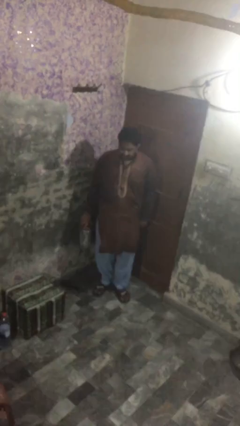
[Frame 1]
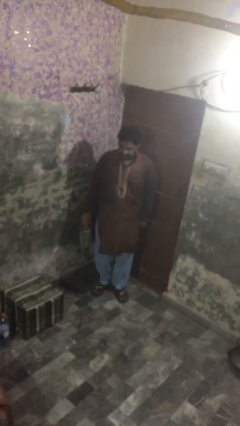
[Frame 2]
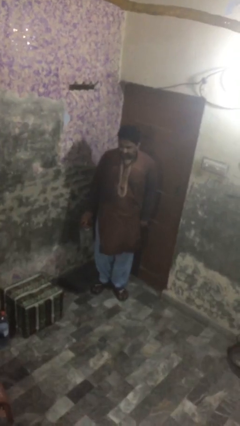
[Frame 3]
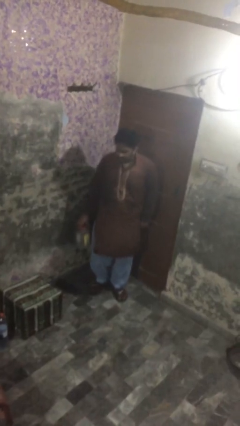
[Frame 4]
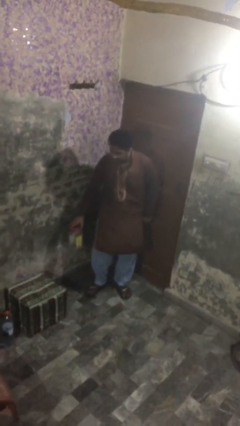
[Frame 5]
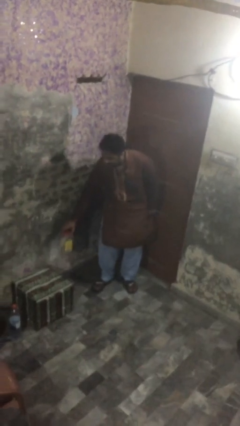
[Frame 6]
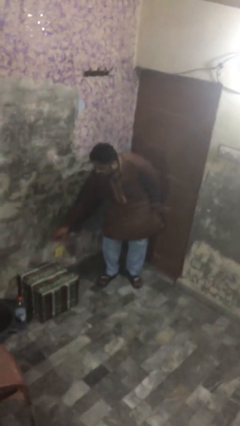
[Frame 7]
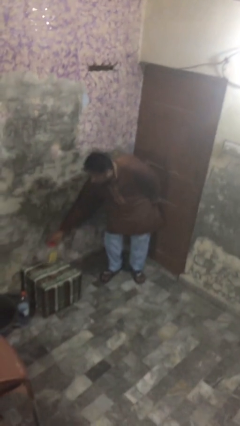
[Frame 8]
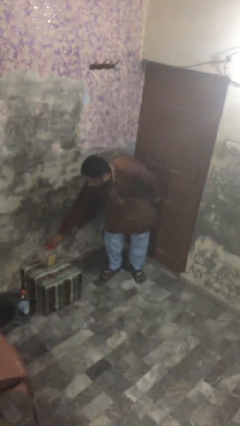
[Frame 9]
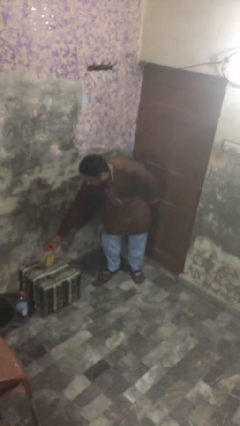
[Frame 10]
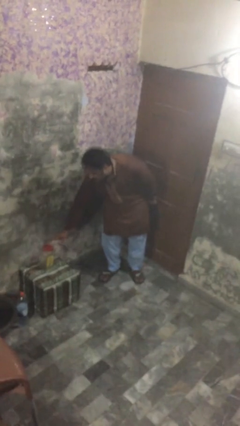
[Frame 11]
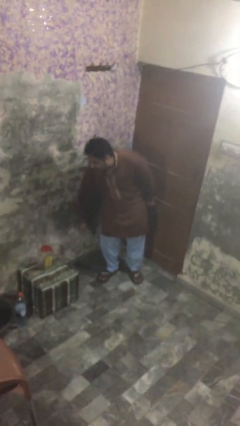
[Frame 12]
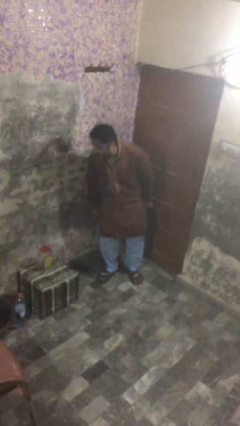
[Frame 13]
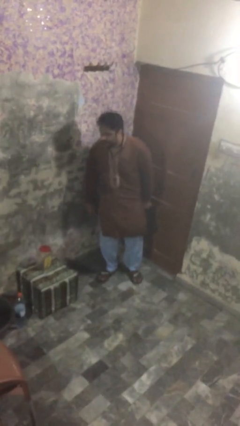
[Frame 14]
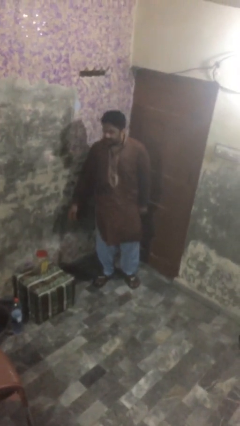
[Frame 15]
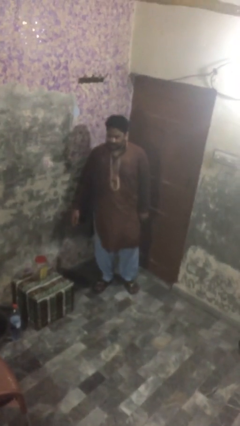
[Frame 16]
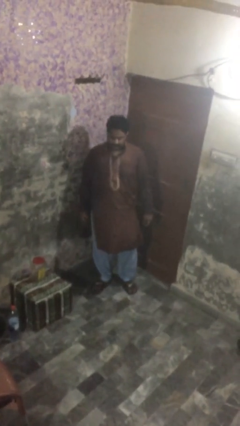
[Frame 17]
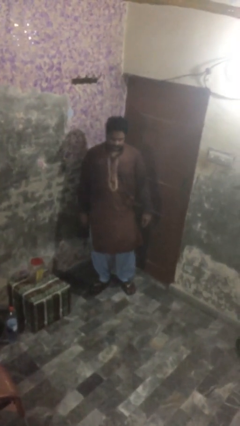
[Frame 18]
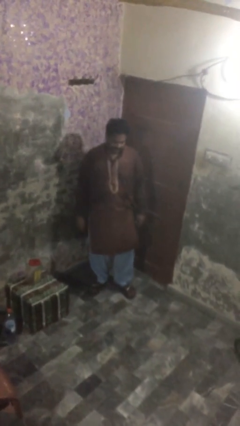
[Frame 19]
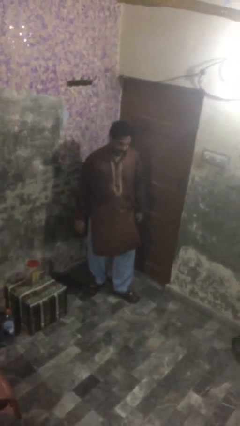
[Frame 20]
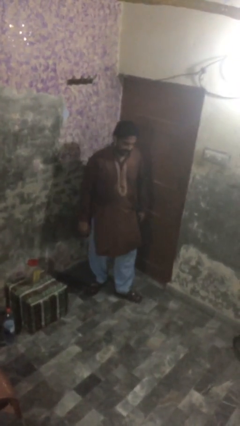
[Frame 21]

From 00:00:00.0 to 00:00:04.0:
person puts down object on table

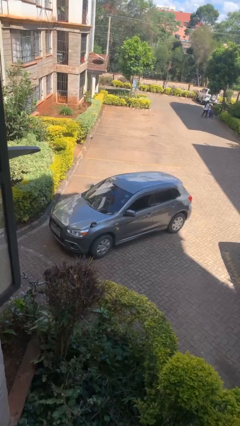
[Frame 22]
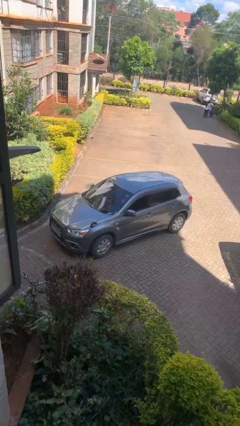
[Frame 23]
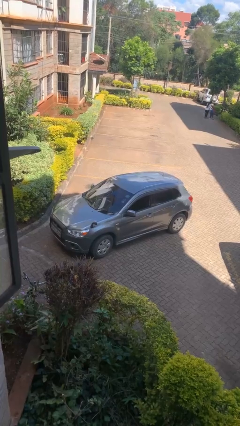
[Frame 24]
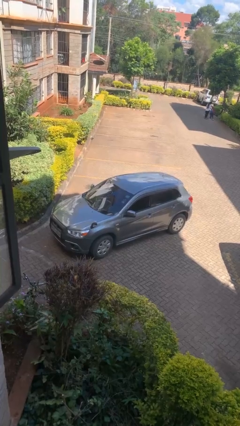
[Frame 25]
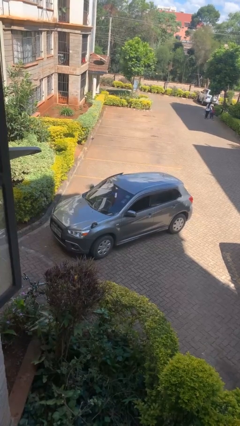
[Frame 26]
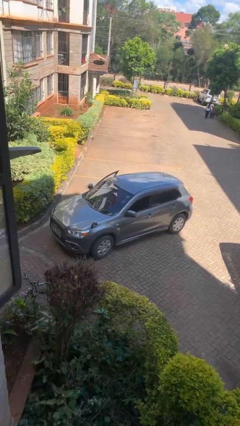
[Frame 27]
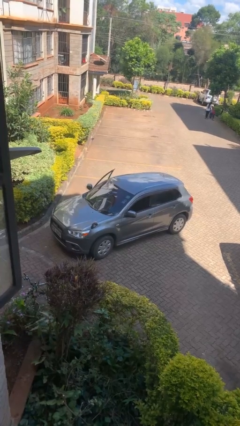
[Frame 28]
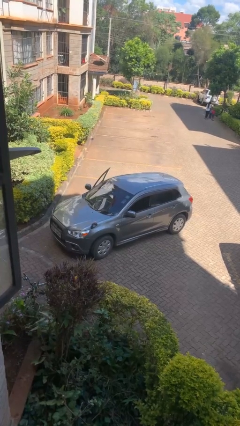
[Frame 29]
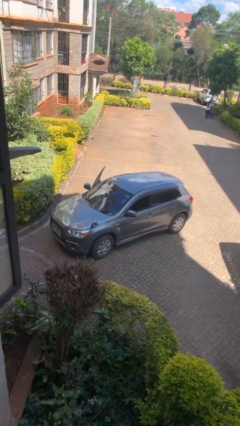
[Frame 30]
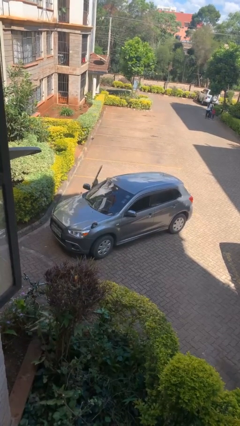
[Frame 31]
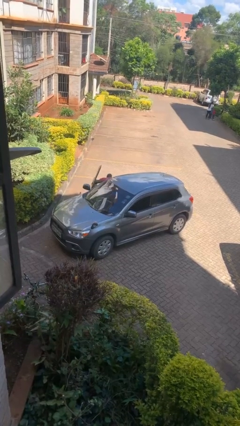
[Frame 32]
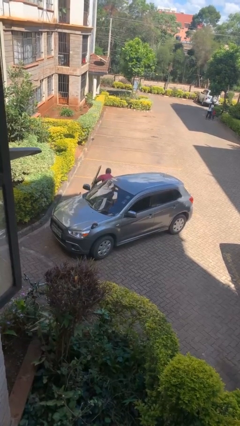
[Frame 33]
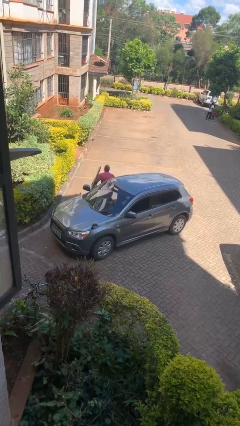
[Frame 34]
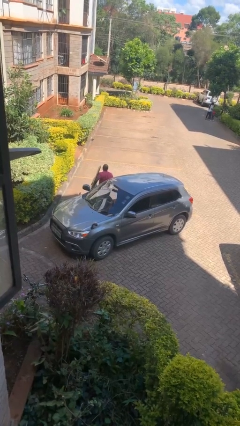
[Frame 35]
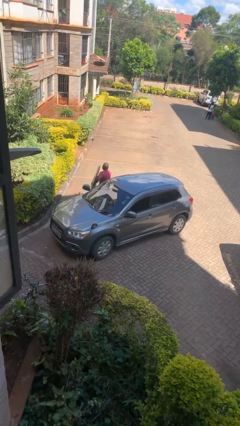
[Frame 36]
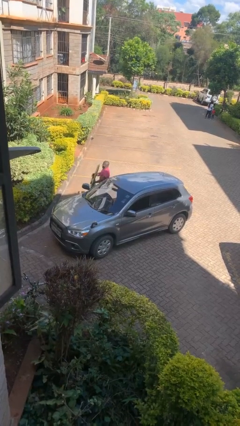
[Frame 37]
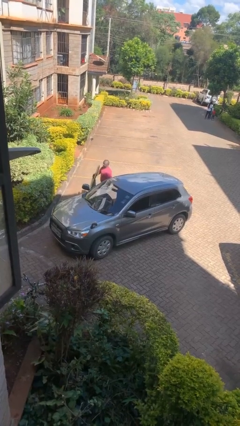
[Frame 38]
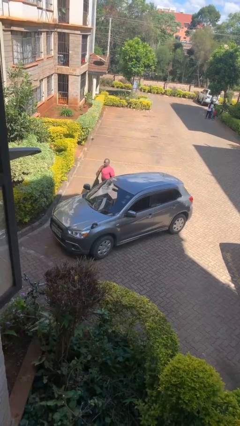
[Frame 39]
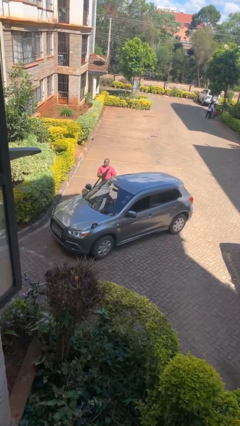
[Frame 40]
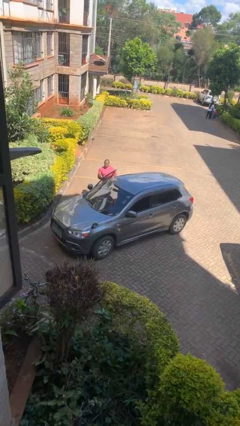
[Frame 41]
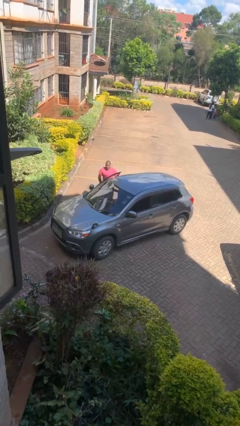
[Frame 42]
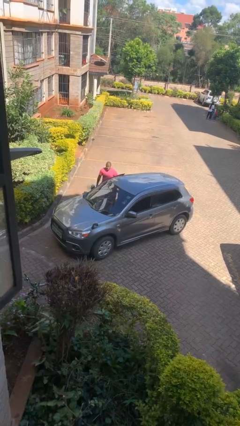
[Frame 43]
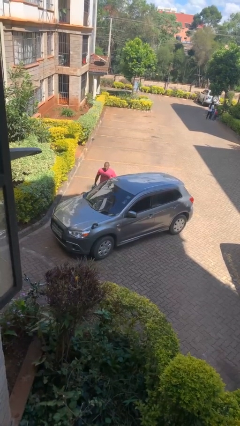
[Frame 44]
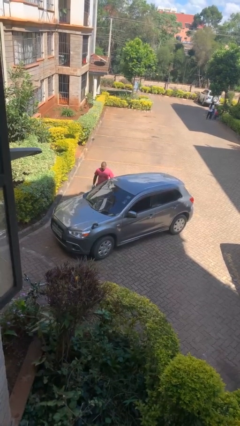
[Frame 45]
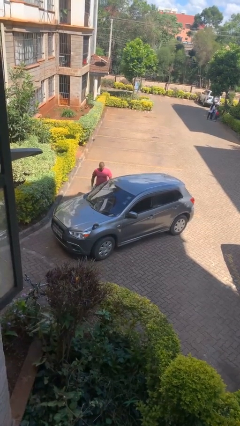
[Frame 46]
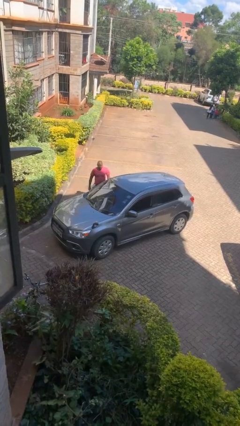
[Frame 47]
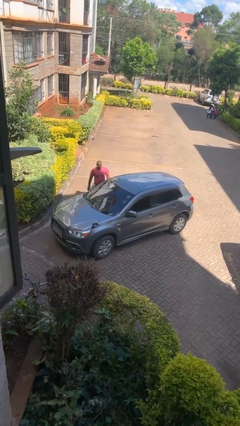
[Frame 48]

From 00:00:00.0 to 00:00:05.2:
car drops off person

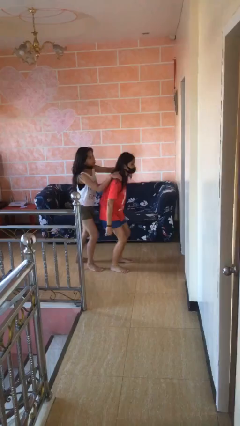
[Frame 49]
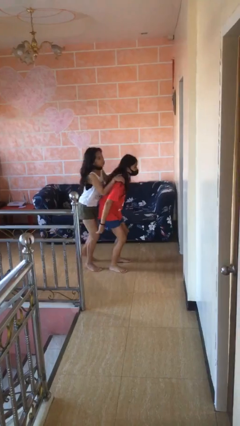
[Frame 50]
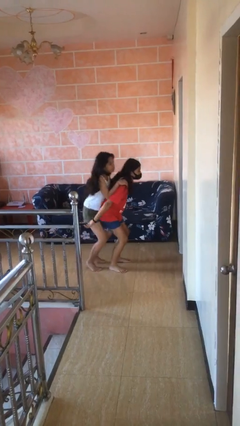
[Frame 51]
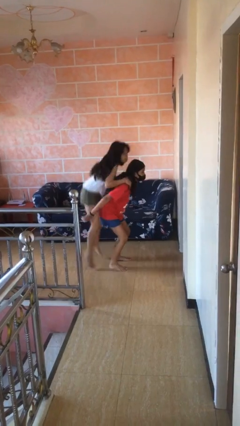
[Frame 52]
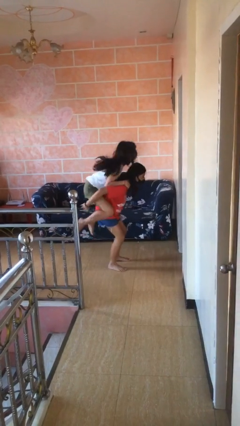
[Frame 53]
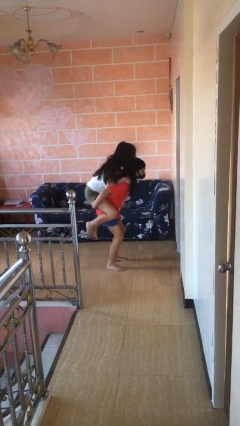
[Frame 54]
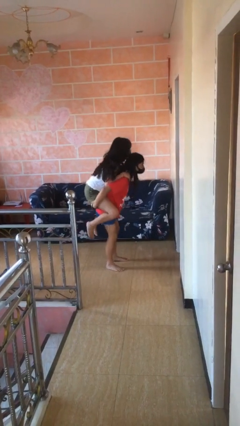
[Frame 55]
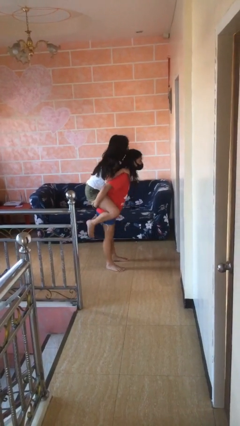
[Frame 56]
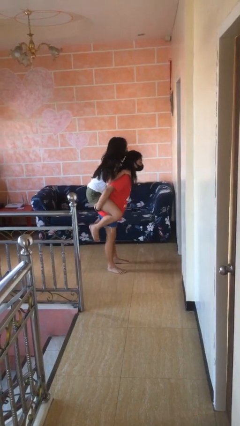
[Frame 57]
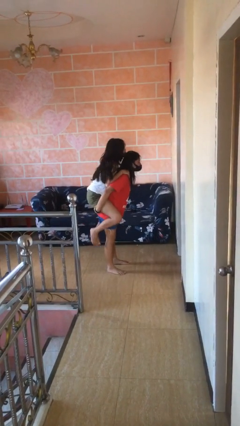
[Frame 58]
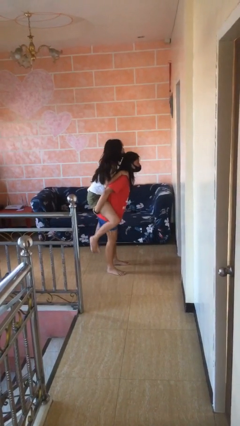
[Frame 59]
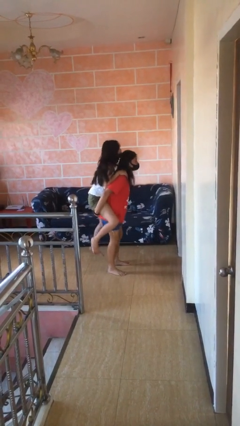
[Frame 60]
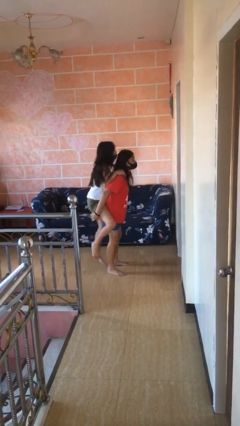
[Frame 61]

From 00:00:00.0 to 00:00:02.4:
person carries person over shoulder

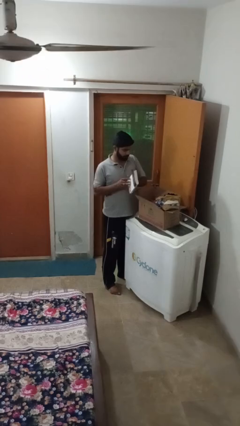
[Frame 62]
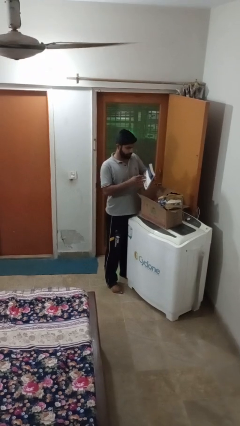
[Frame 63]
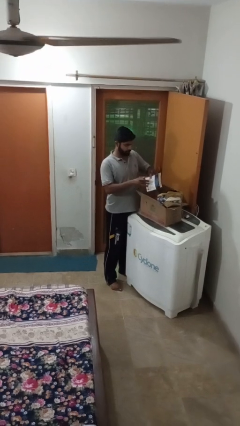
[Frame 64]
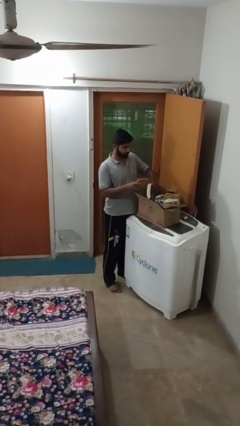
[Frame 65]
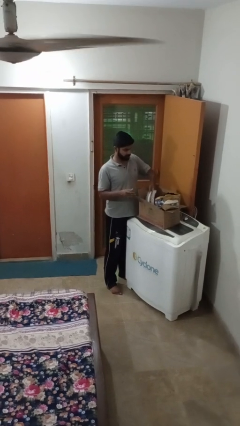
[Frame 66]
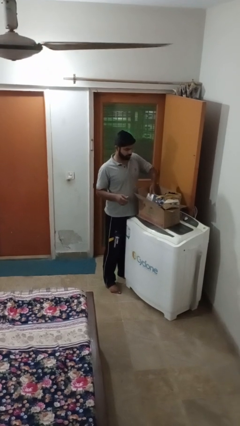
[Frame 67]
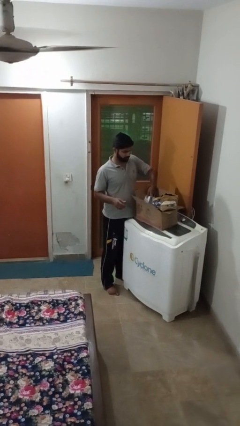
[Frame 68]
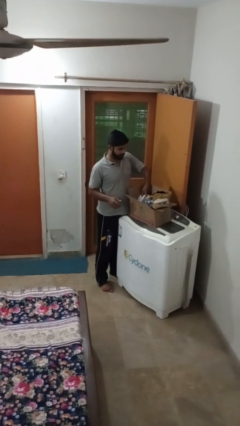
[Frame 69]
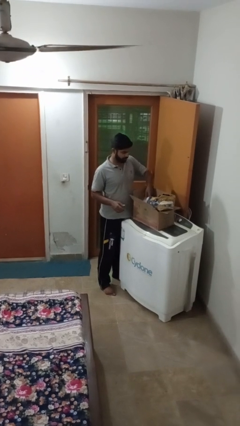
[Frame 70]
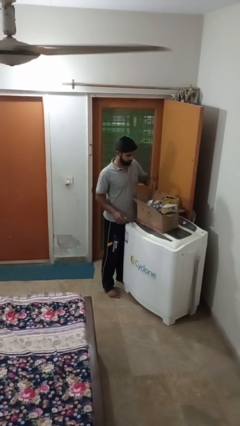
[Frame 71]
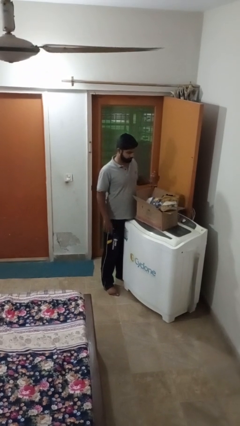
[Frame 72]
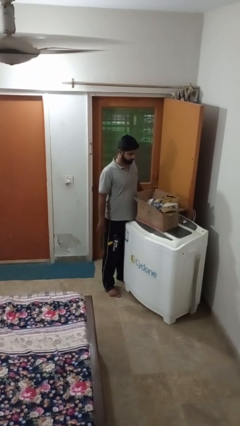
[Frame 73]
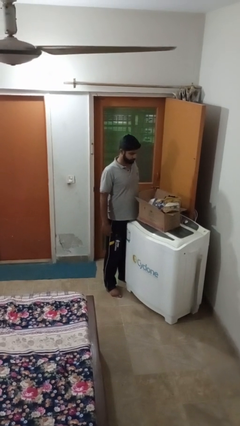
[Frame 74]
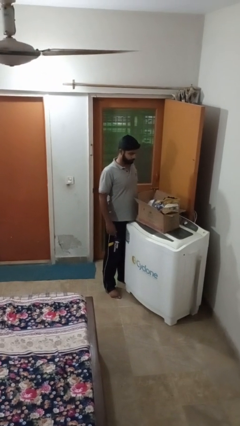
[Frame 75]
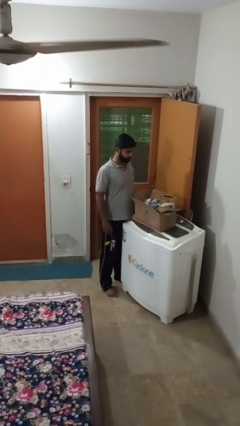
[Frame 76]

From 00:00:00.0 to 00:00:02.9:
person puts object into box

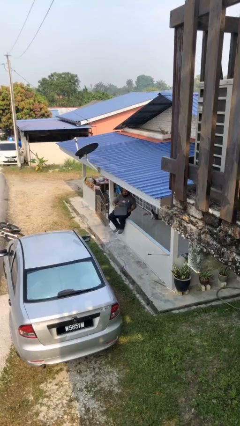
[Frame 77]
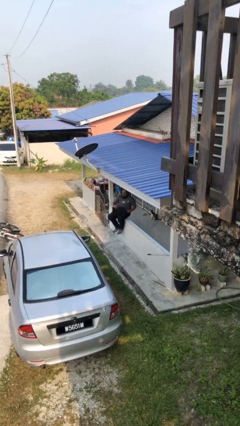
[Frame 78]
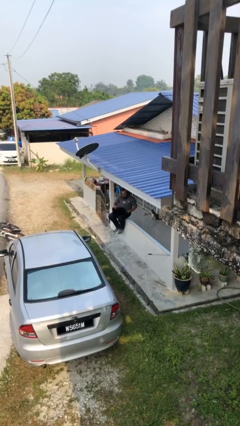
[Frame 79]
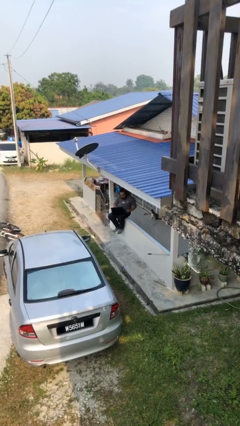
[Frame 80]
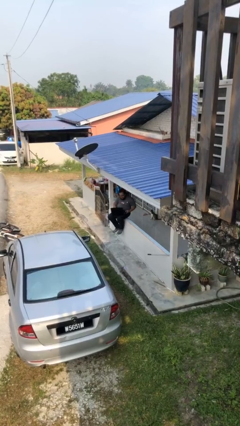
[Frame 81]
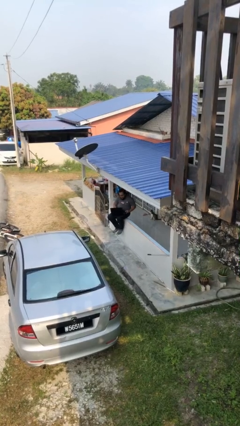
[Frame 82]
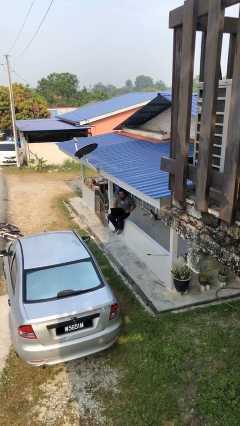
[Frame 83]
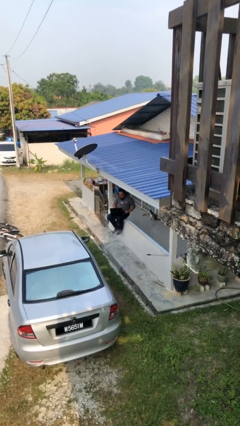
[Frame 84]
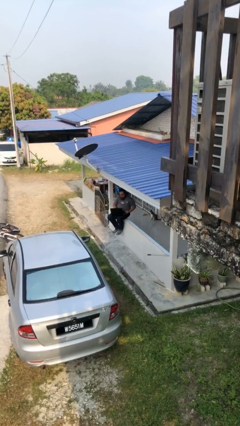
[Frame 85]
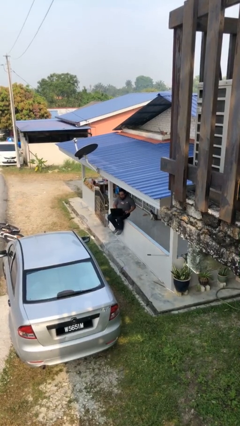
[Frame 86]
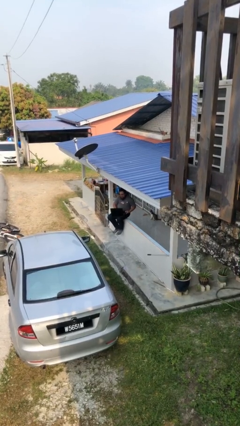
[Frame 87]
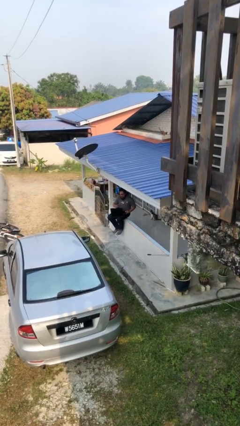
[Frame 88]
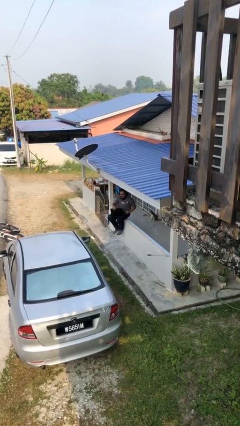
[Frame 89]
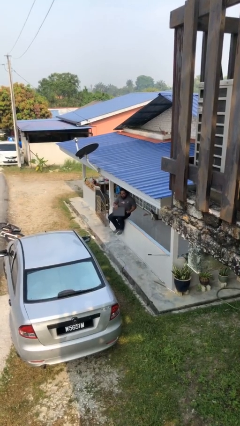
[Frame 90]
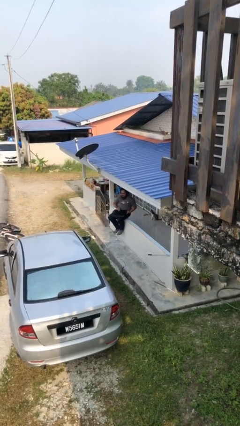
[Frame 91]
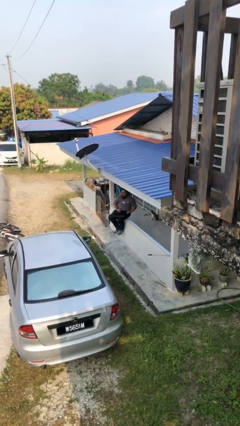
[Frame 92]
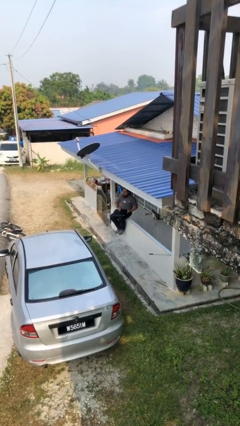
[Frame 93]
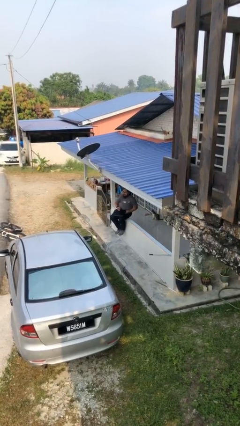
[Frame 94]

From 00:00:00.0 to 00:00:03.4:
person interacts with laptop
